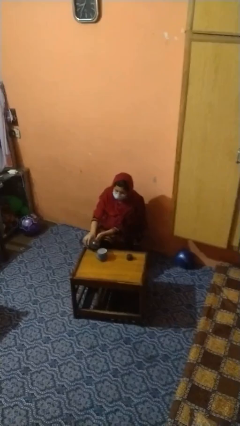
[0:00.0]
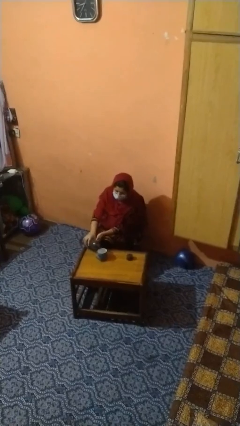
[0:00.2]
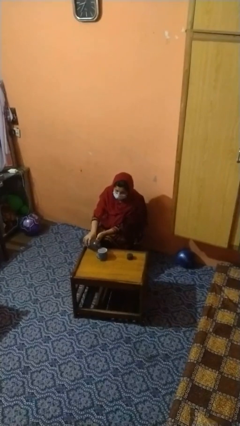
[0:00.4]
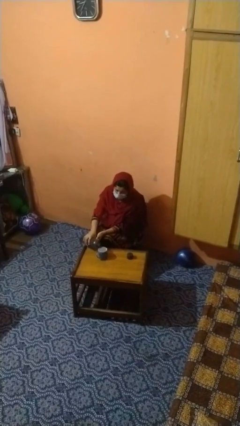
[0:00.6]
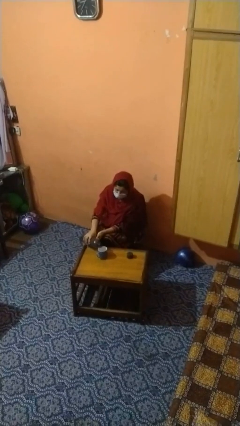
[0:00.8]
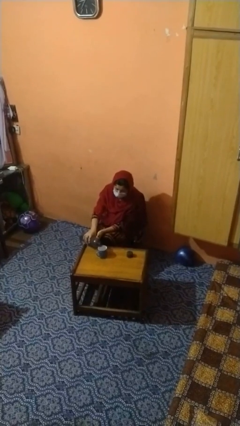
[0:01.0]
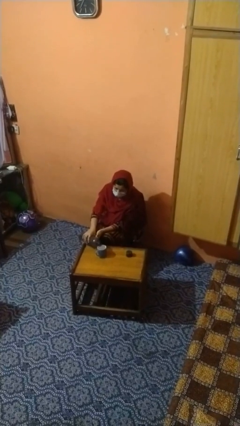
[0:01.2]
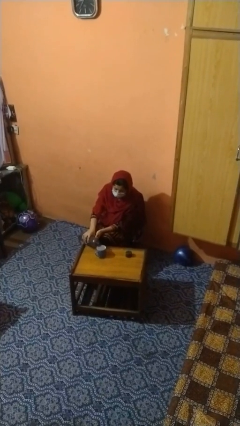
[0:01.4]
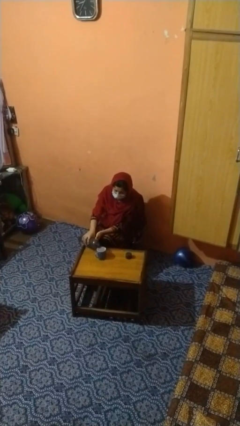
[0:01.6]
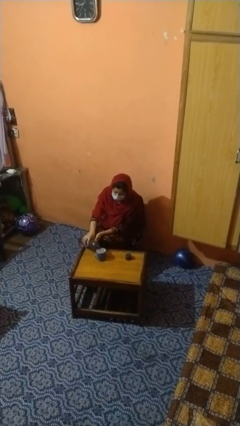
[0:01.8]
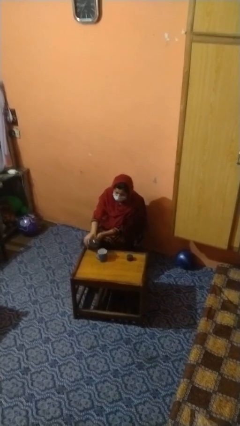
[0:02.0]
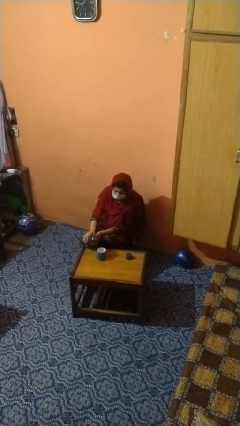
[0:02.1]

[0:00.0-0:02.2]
person pours liquid into cup

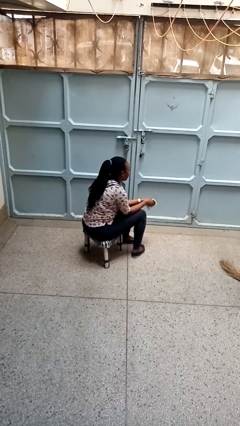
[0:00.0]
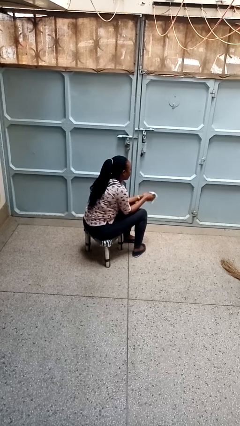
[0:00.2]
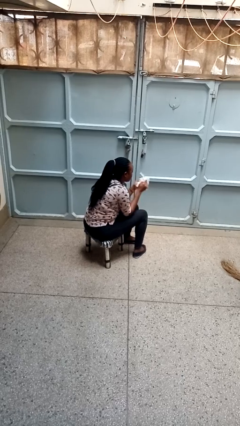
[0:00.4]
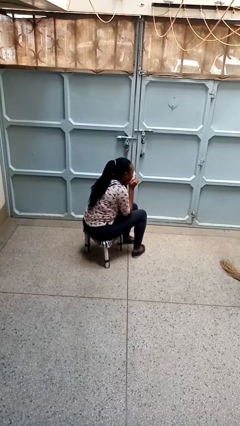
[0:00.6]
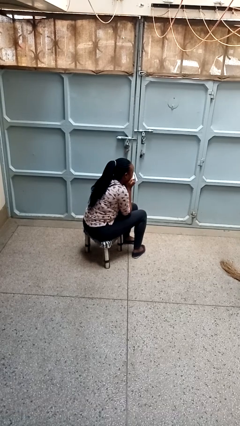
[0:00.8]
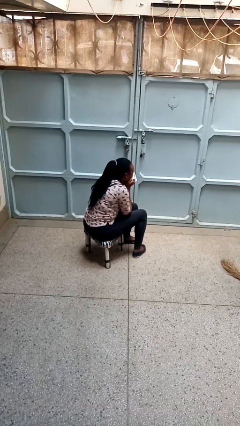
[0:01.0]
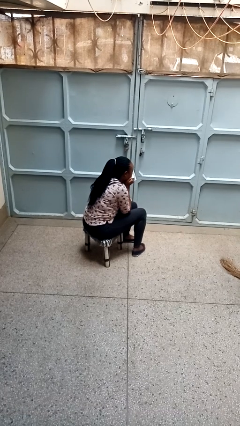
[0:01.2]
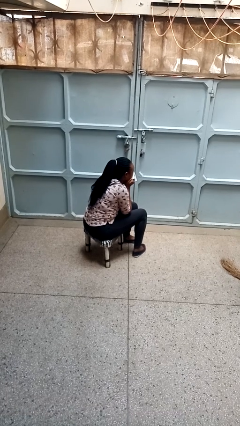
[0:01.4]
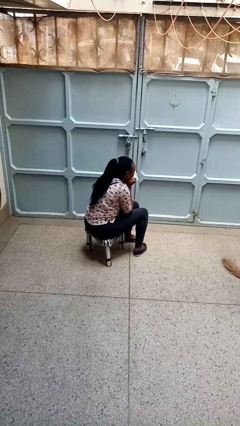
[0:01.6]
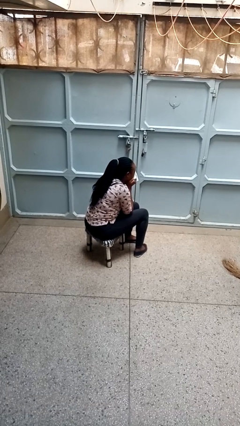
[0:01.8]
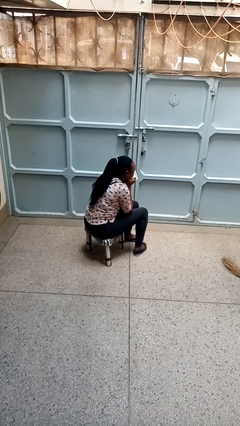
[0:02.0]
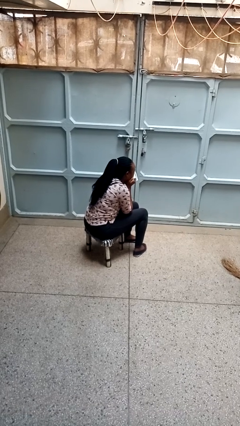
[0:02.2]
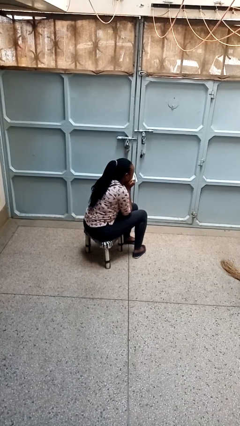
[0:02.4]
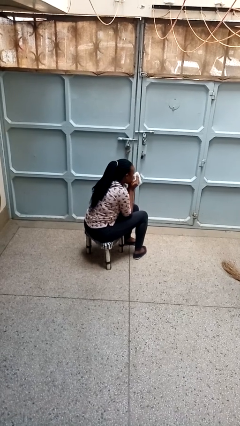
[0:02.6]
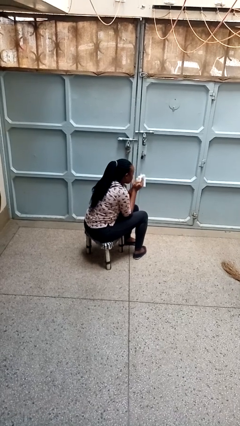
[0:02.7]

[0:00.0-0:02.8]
person blows nose

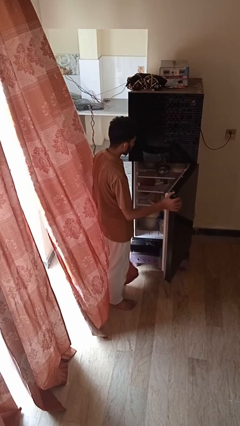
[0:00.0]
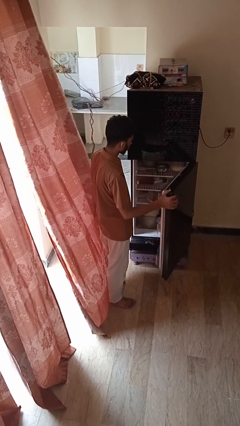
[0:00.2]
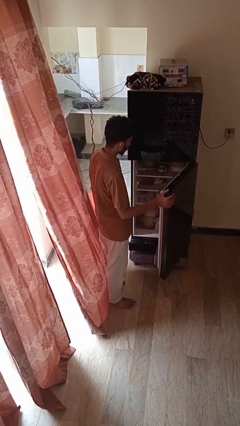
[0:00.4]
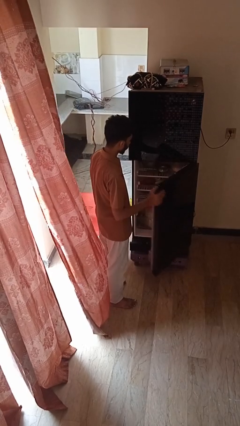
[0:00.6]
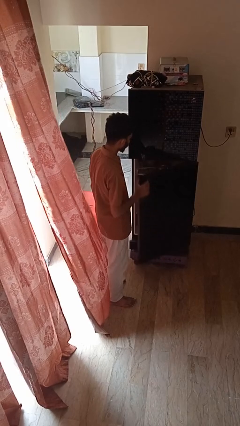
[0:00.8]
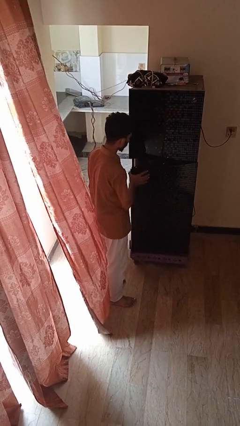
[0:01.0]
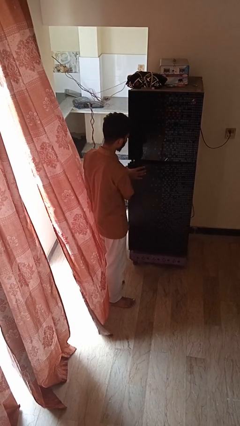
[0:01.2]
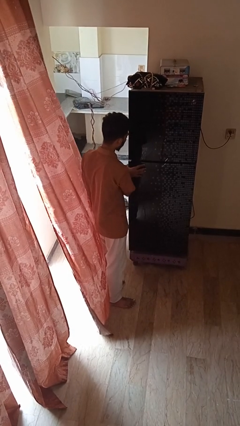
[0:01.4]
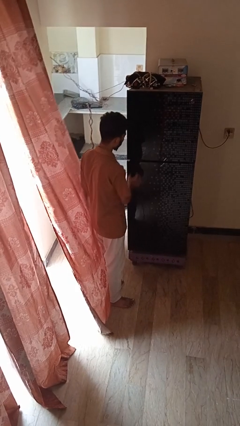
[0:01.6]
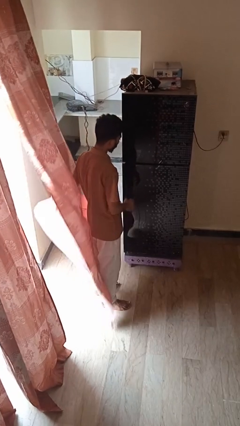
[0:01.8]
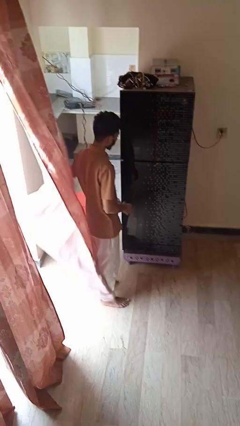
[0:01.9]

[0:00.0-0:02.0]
person closes refrigerator

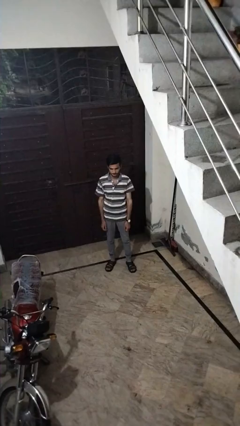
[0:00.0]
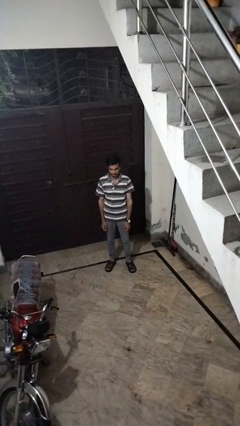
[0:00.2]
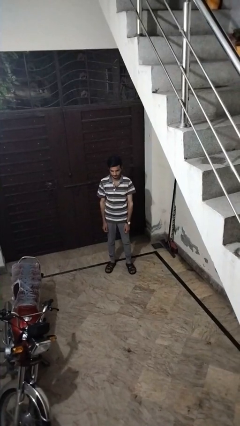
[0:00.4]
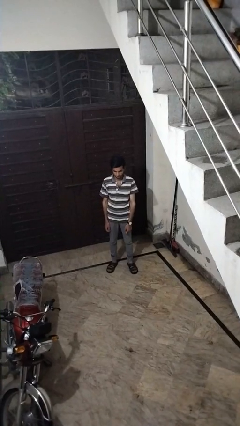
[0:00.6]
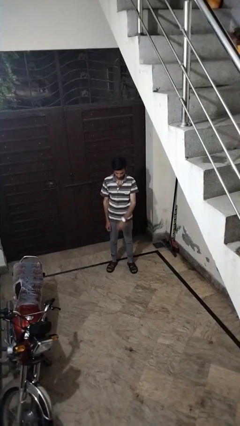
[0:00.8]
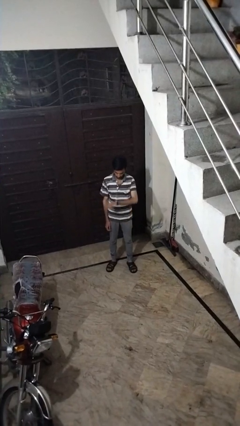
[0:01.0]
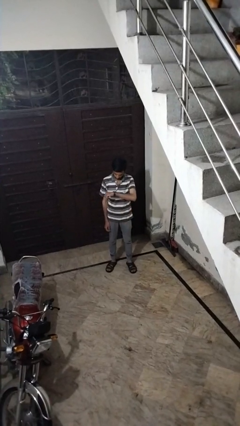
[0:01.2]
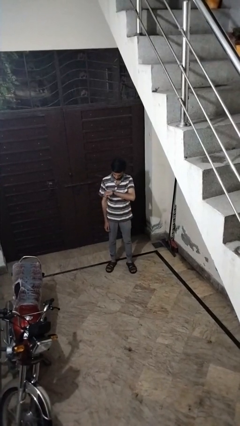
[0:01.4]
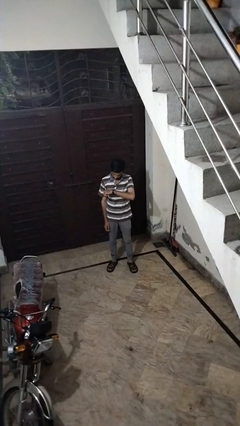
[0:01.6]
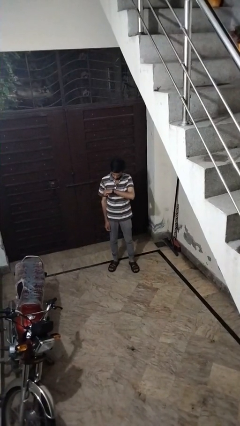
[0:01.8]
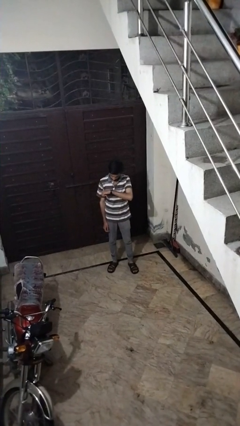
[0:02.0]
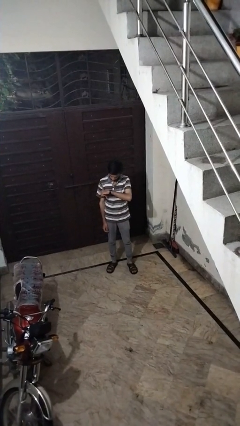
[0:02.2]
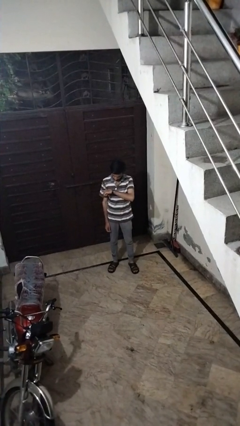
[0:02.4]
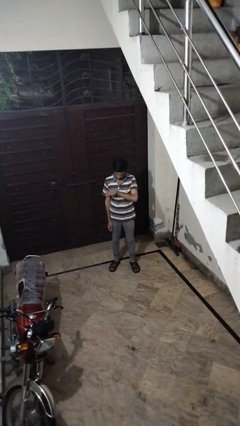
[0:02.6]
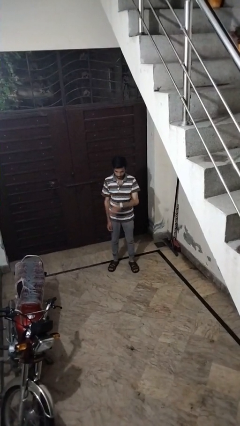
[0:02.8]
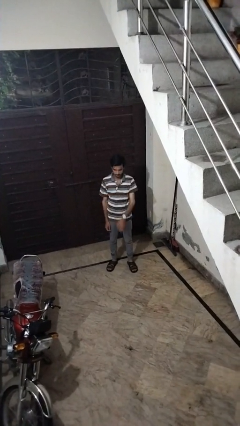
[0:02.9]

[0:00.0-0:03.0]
person looks at wristwatch

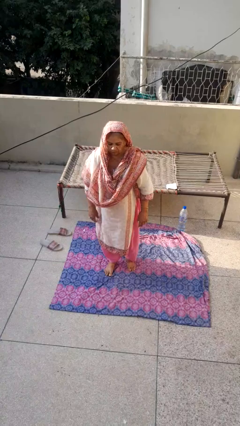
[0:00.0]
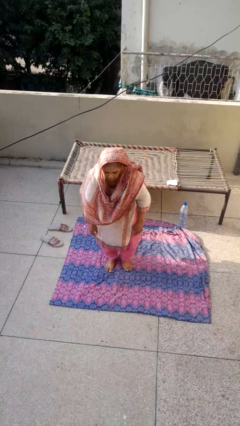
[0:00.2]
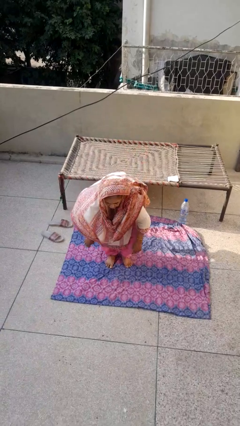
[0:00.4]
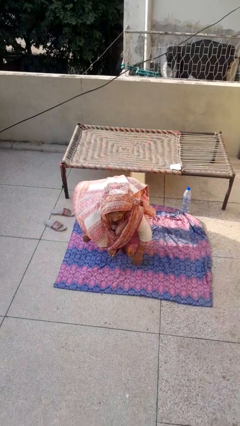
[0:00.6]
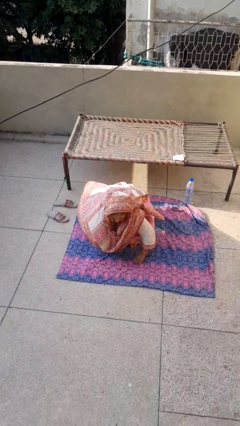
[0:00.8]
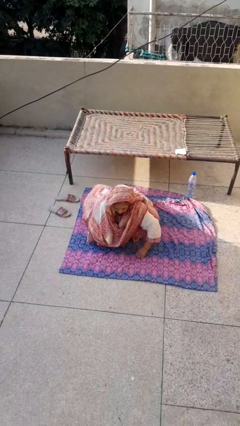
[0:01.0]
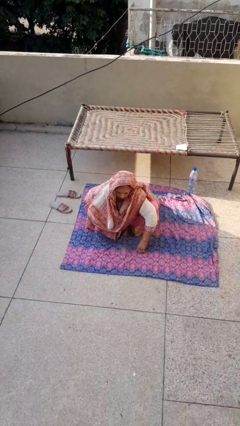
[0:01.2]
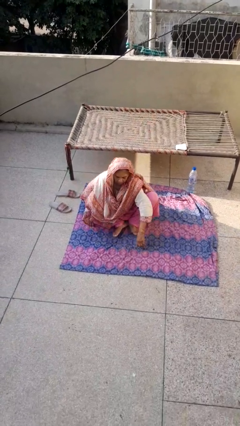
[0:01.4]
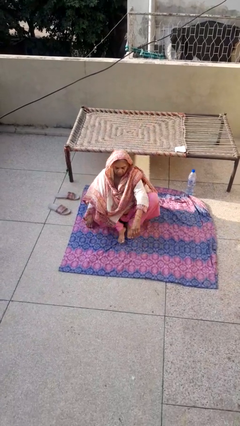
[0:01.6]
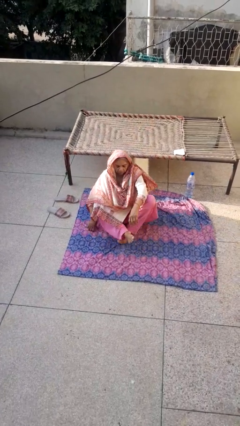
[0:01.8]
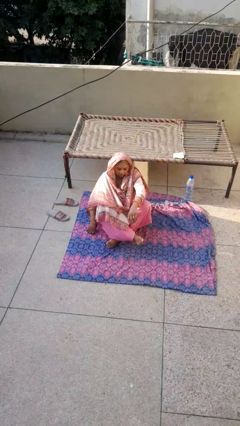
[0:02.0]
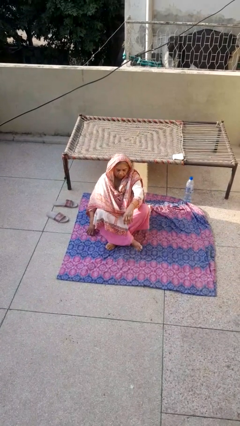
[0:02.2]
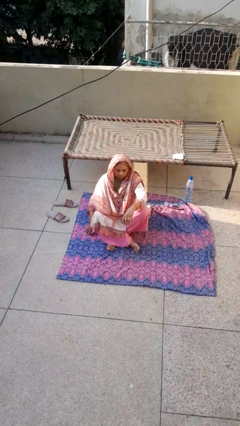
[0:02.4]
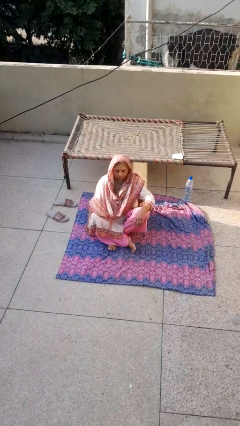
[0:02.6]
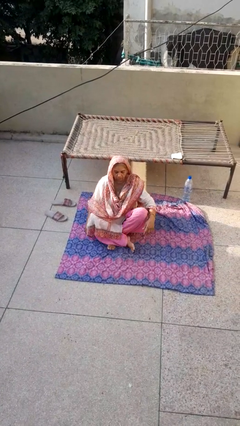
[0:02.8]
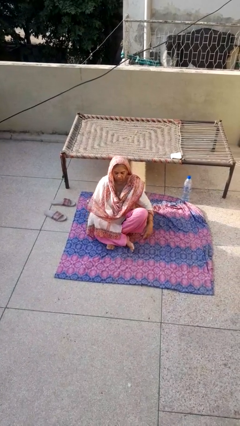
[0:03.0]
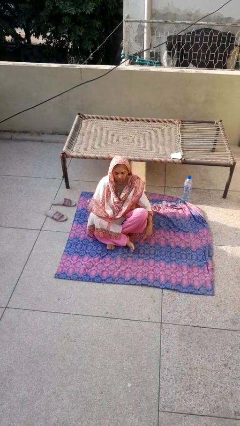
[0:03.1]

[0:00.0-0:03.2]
person sits crisscross

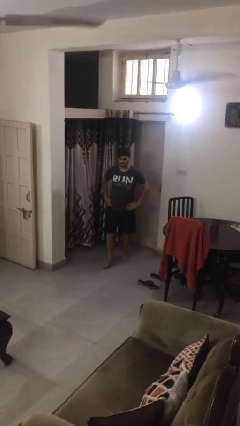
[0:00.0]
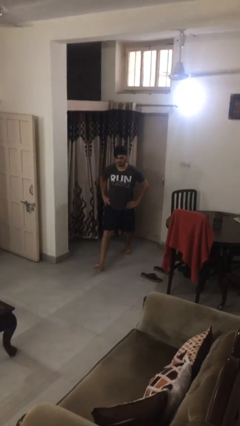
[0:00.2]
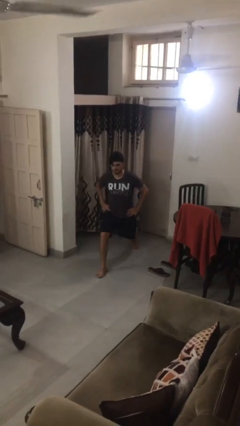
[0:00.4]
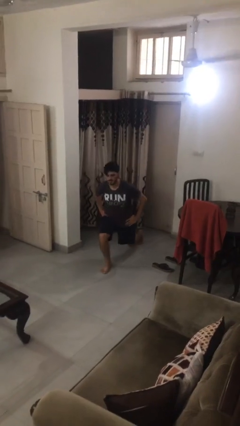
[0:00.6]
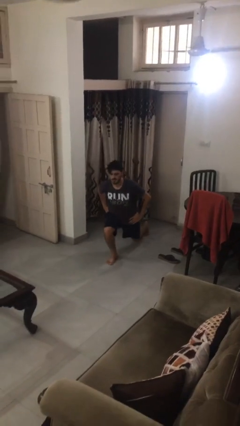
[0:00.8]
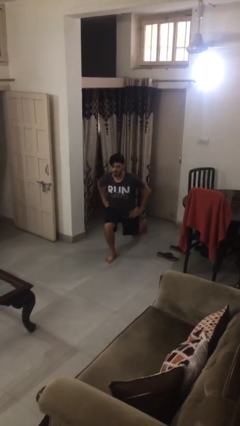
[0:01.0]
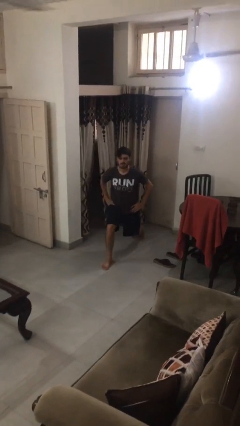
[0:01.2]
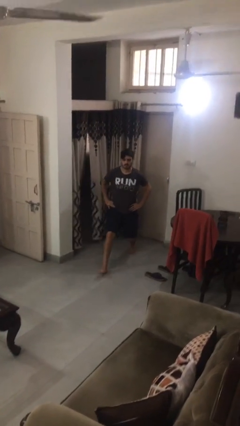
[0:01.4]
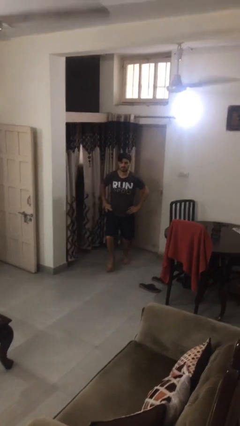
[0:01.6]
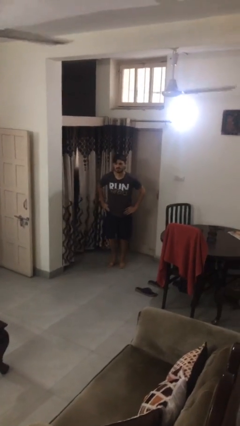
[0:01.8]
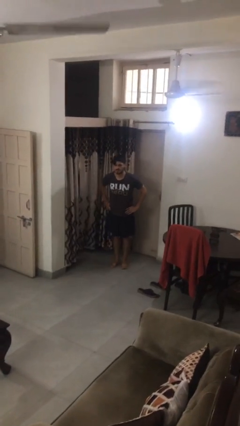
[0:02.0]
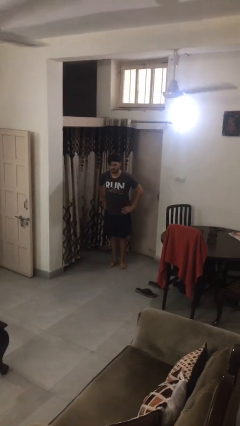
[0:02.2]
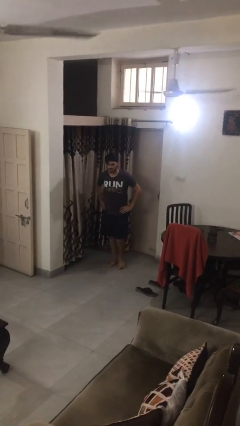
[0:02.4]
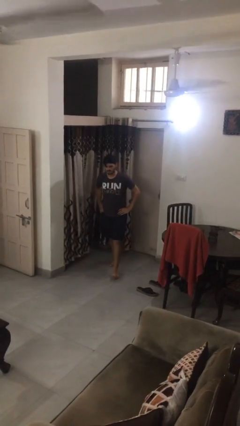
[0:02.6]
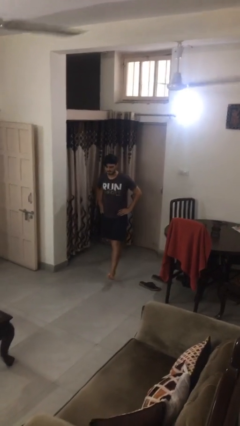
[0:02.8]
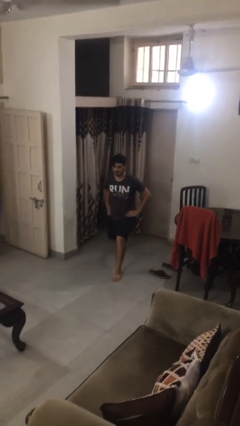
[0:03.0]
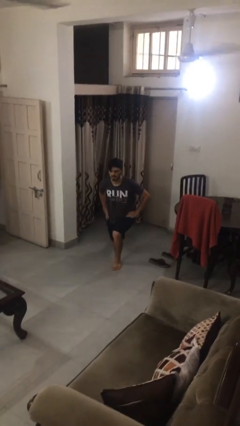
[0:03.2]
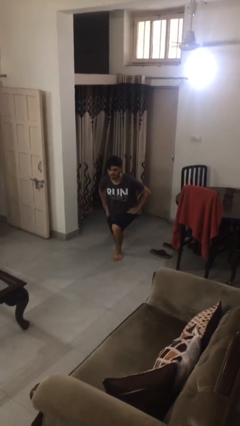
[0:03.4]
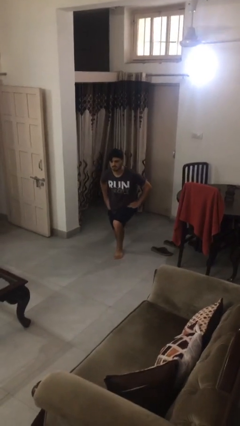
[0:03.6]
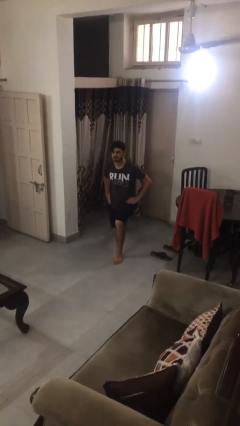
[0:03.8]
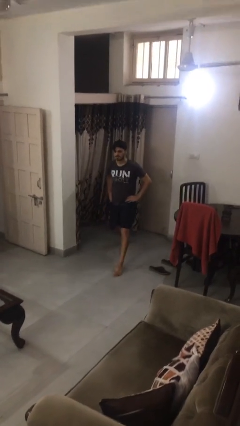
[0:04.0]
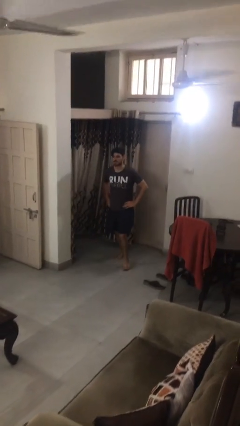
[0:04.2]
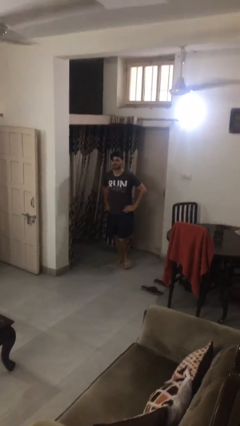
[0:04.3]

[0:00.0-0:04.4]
person exercises with lunges
